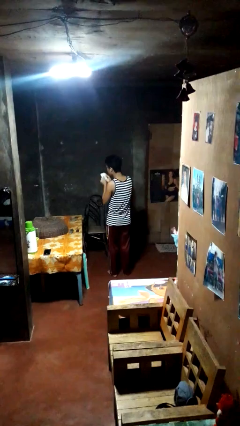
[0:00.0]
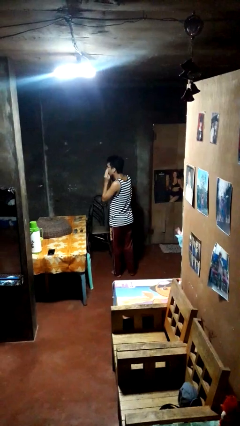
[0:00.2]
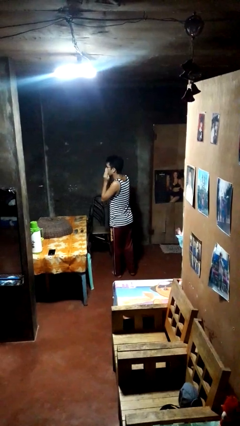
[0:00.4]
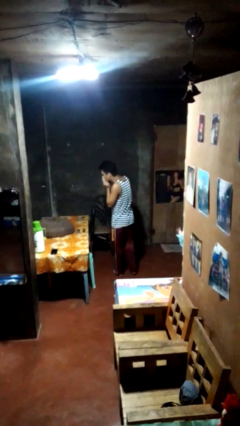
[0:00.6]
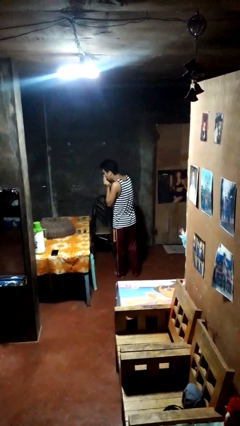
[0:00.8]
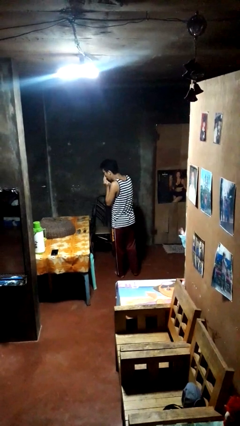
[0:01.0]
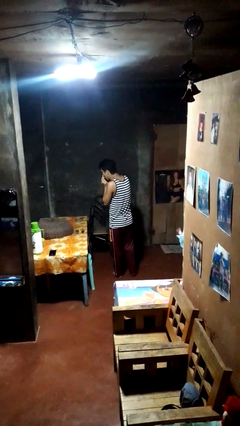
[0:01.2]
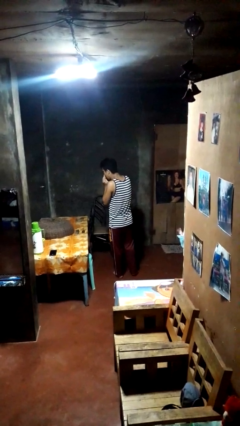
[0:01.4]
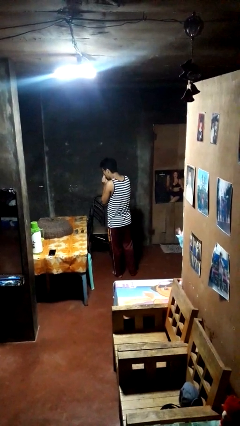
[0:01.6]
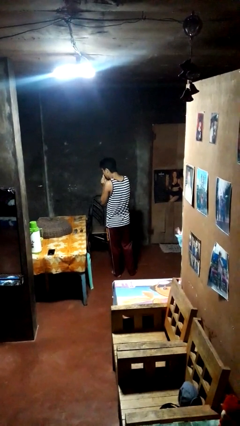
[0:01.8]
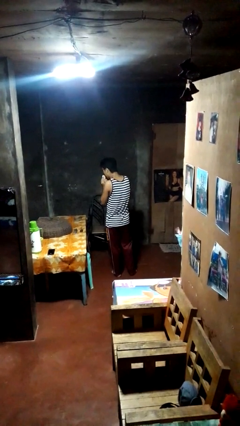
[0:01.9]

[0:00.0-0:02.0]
person blows nose

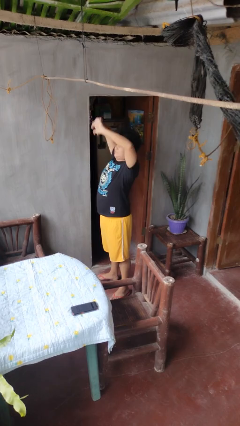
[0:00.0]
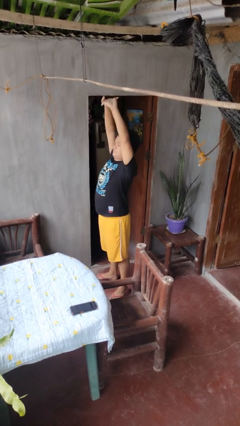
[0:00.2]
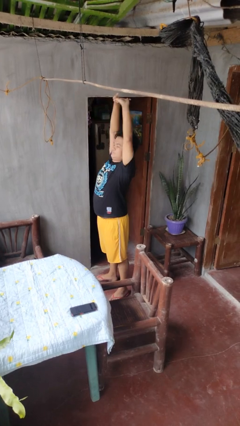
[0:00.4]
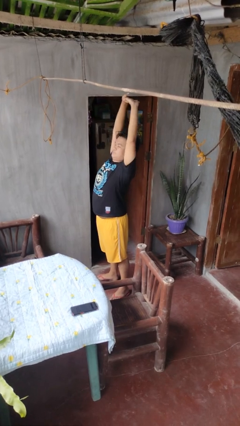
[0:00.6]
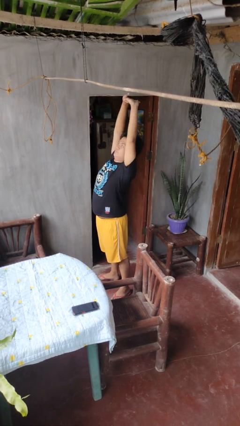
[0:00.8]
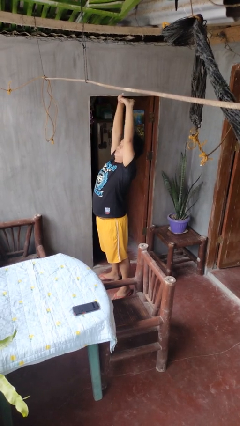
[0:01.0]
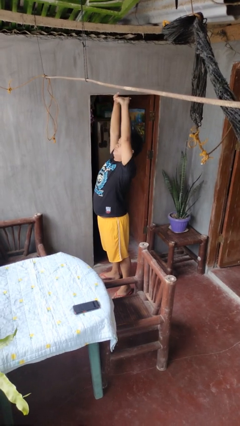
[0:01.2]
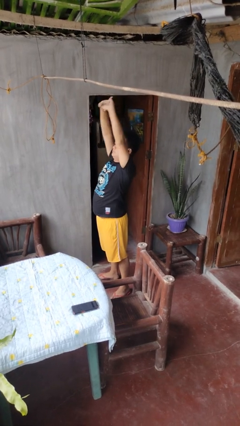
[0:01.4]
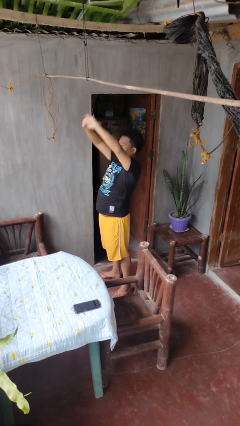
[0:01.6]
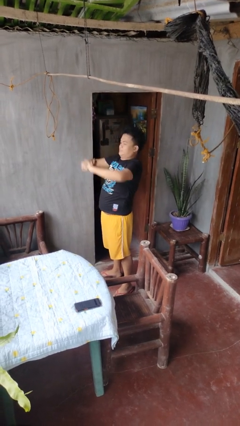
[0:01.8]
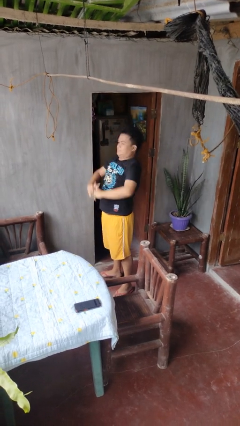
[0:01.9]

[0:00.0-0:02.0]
person stretches arms over head

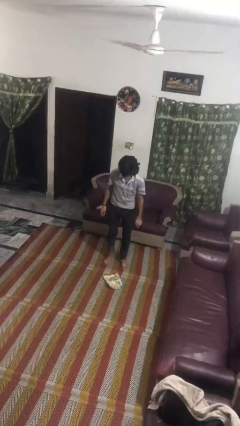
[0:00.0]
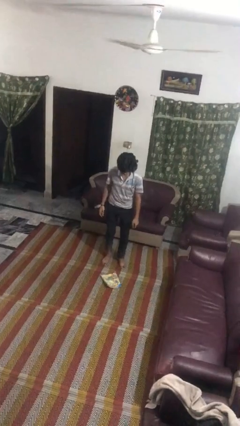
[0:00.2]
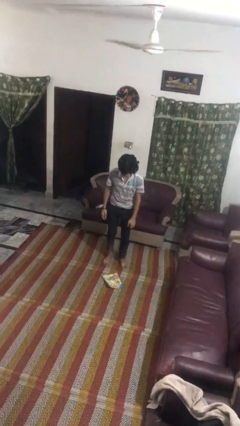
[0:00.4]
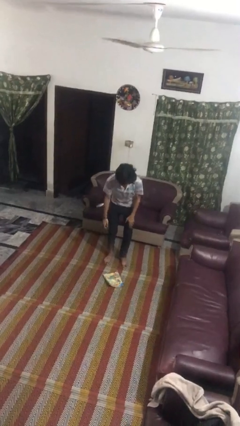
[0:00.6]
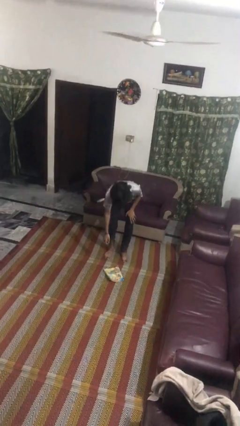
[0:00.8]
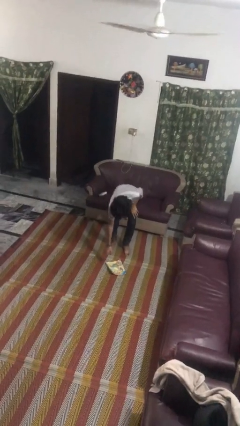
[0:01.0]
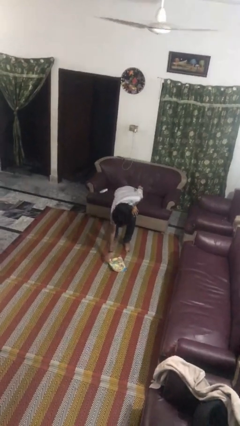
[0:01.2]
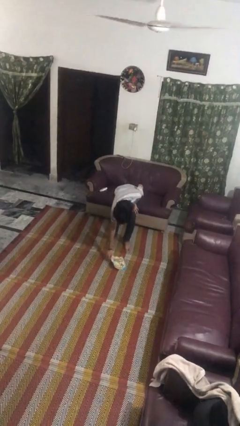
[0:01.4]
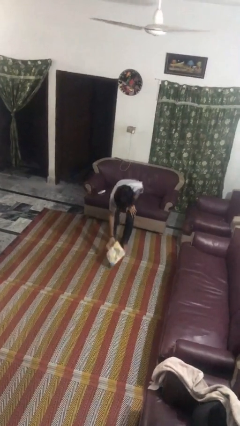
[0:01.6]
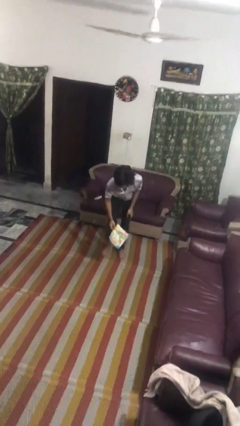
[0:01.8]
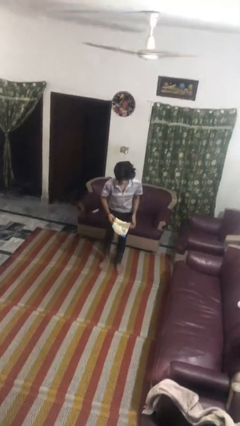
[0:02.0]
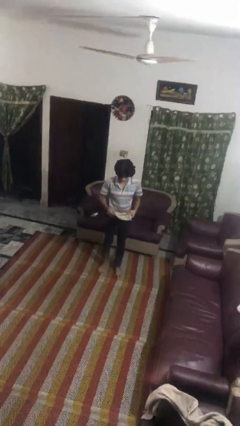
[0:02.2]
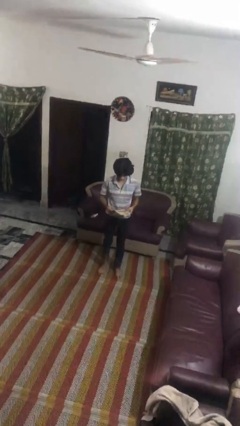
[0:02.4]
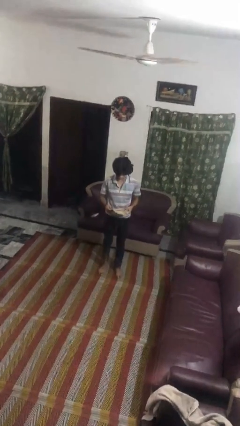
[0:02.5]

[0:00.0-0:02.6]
person picks up object from floor

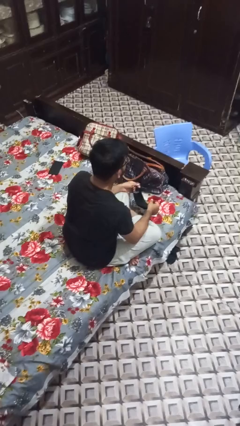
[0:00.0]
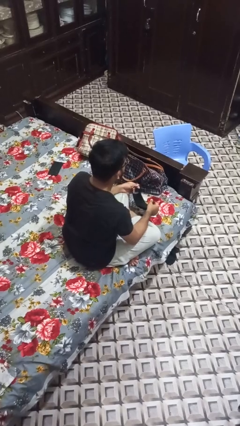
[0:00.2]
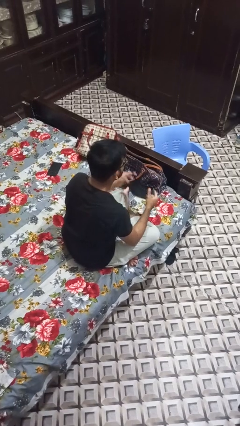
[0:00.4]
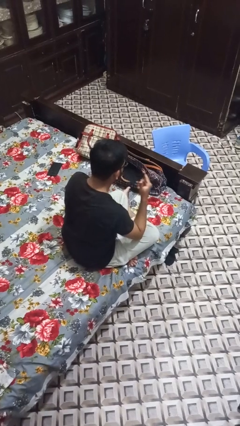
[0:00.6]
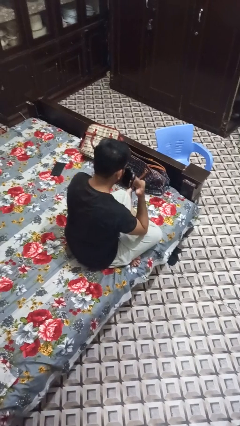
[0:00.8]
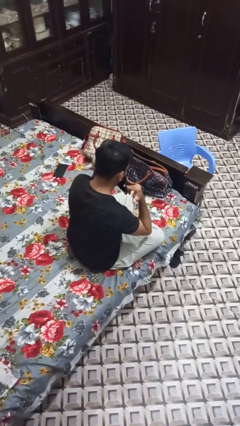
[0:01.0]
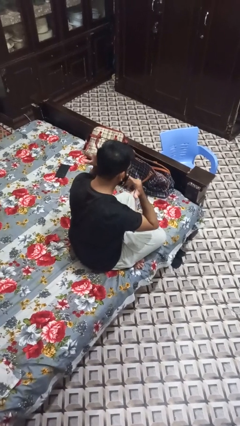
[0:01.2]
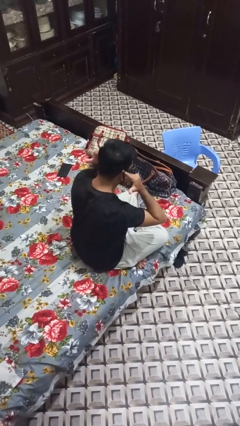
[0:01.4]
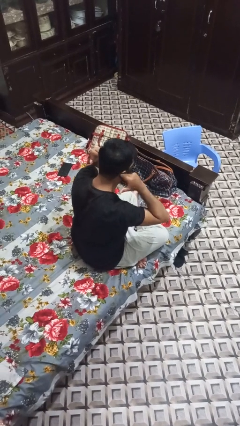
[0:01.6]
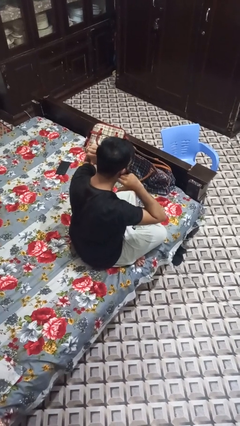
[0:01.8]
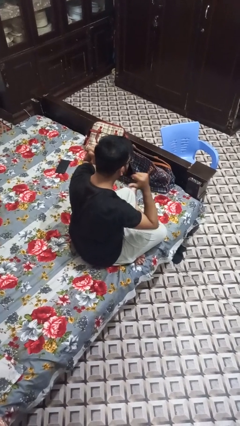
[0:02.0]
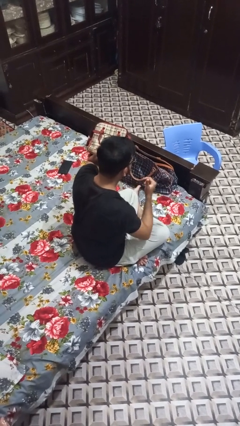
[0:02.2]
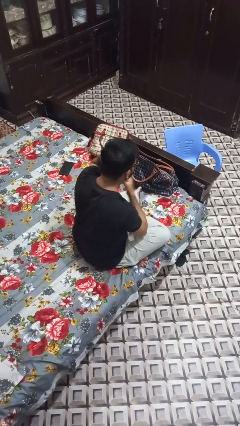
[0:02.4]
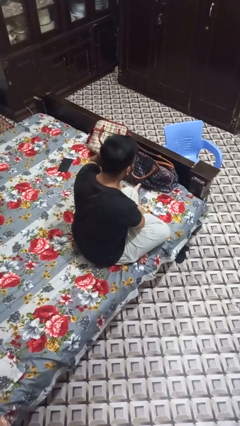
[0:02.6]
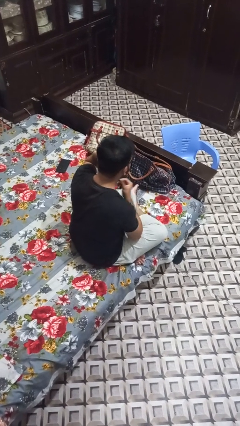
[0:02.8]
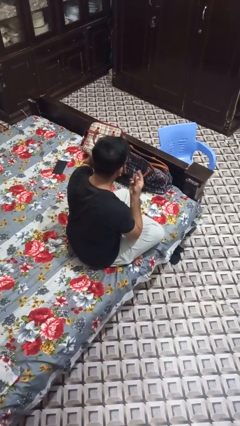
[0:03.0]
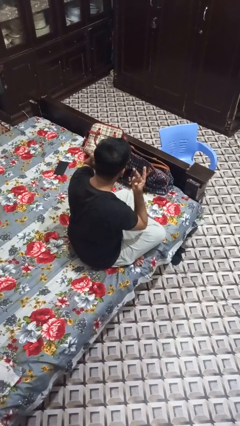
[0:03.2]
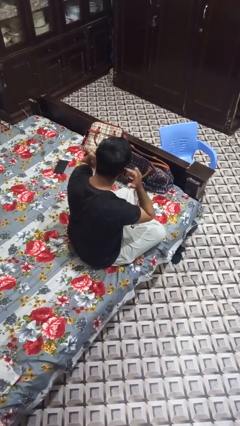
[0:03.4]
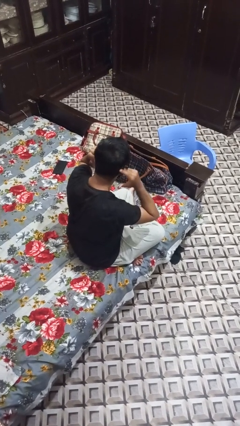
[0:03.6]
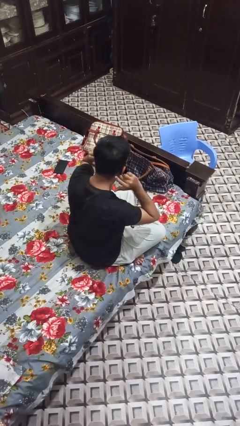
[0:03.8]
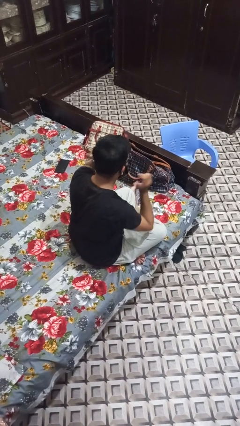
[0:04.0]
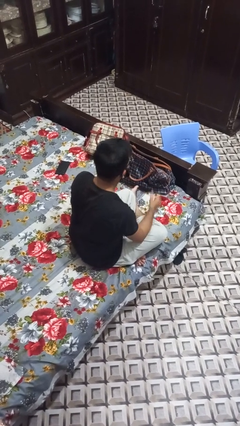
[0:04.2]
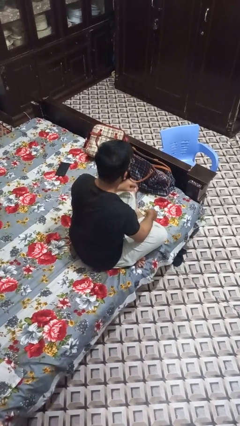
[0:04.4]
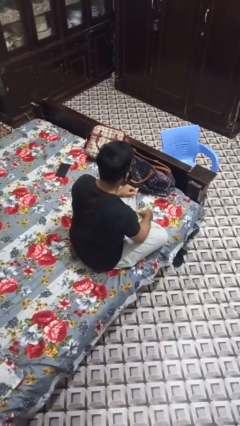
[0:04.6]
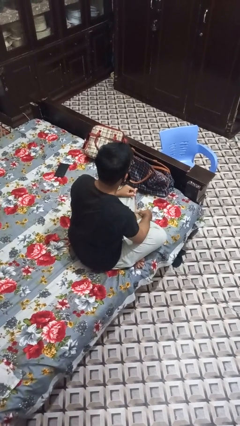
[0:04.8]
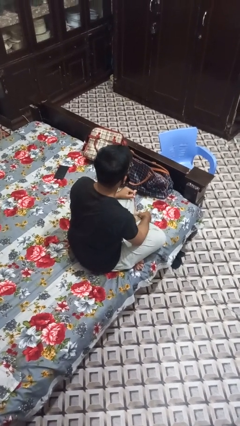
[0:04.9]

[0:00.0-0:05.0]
person puts on facemask

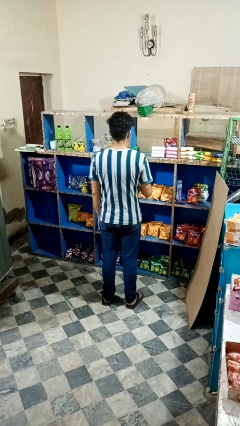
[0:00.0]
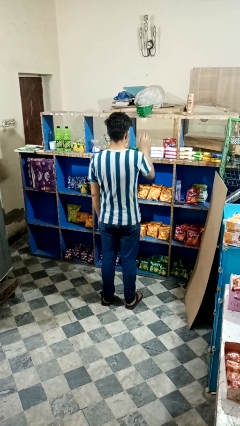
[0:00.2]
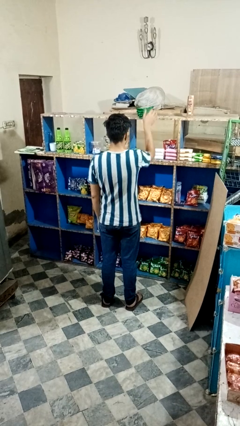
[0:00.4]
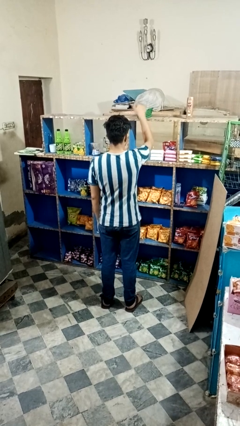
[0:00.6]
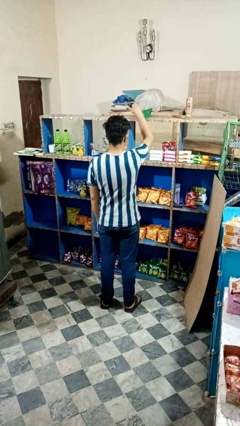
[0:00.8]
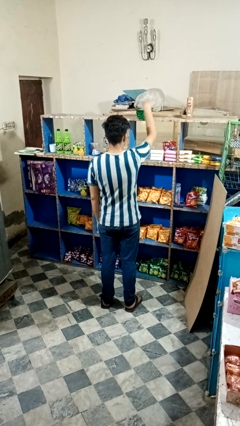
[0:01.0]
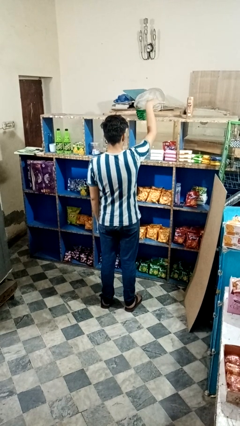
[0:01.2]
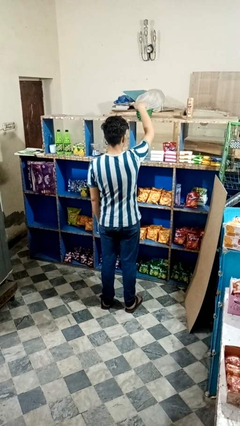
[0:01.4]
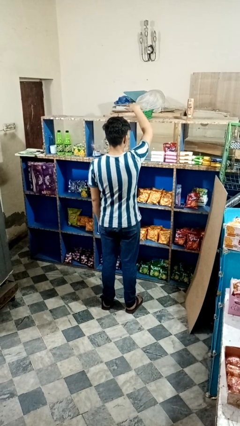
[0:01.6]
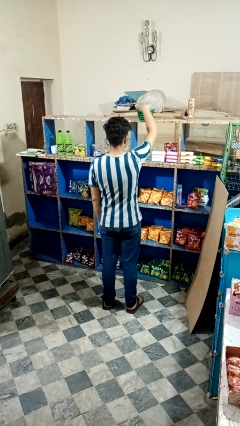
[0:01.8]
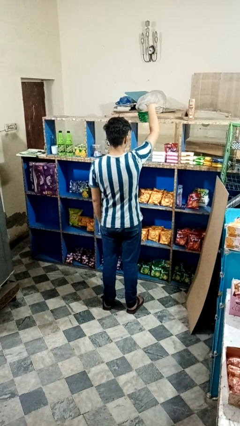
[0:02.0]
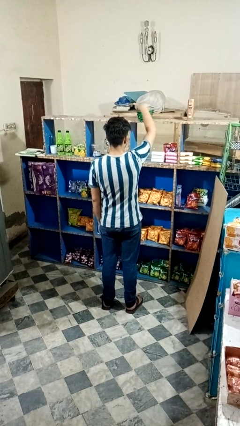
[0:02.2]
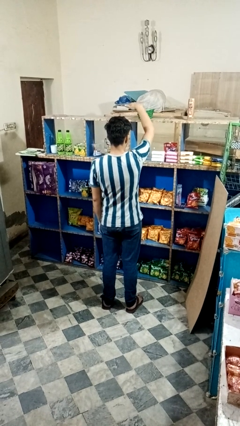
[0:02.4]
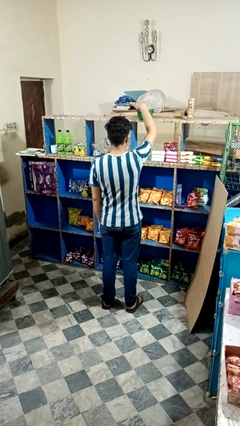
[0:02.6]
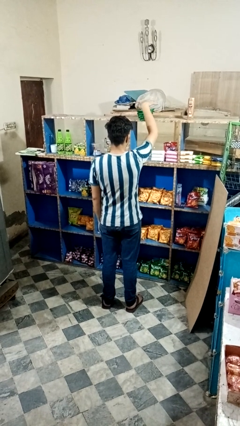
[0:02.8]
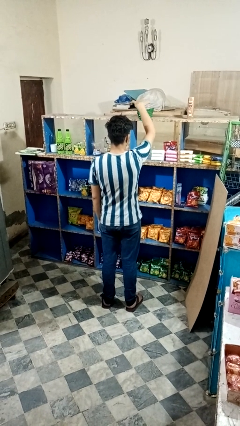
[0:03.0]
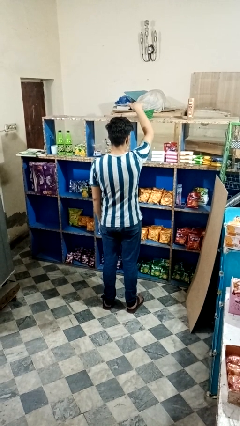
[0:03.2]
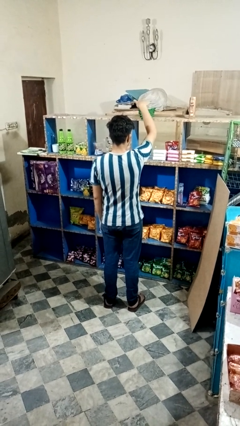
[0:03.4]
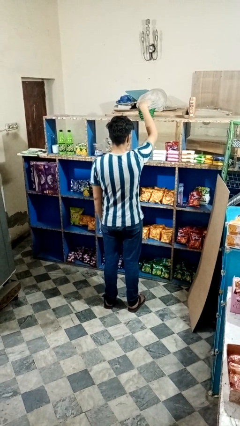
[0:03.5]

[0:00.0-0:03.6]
person waves hand over object

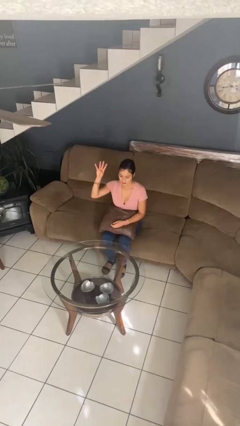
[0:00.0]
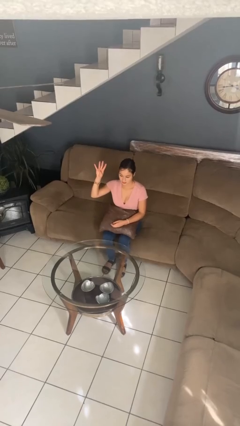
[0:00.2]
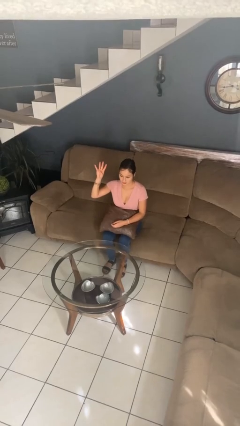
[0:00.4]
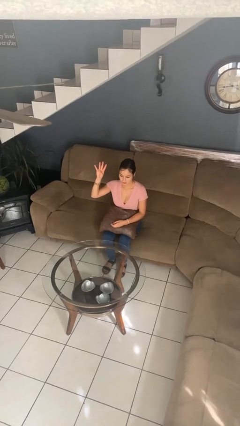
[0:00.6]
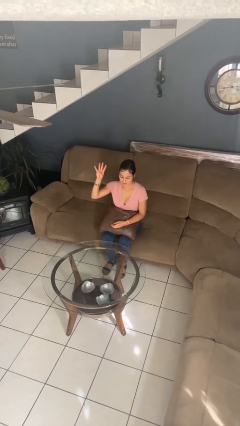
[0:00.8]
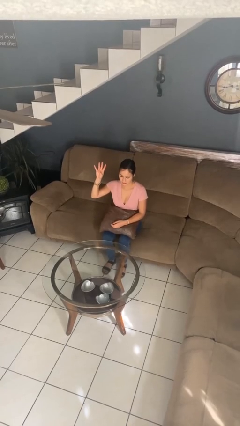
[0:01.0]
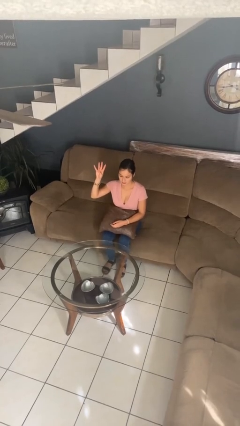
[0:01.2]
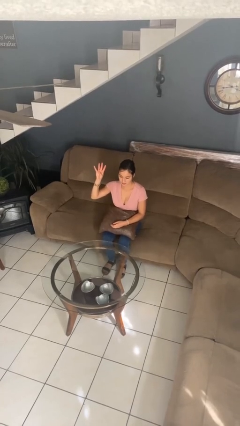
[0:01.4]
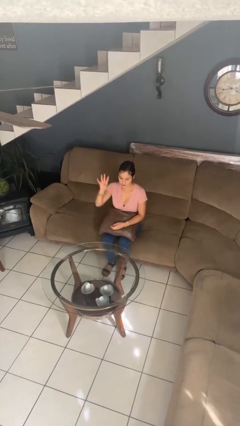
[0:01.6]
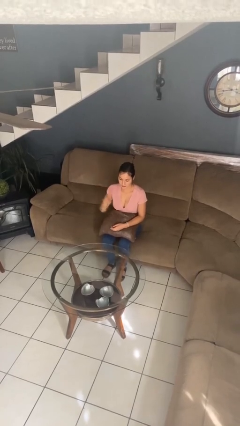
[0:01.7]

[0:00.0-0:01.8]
person gestures number four

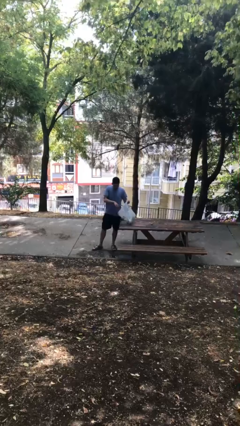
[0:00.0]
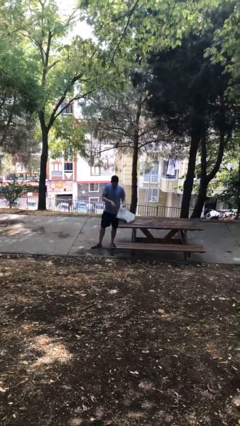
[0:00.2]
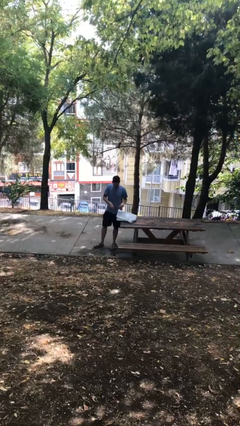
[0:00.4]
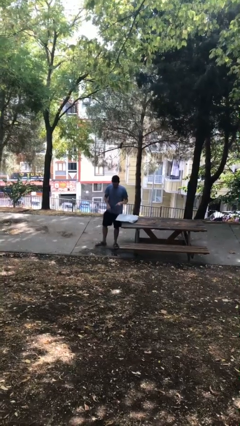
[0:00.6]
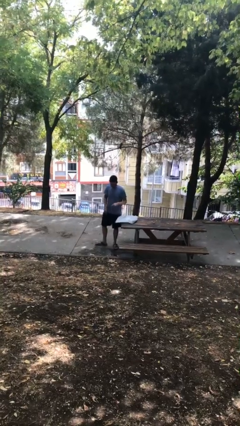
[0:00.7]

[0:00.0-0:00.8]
person puts down object on table
